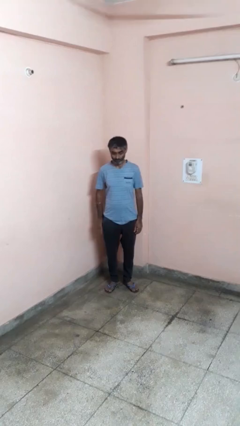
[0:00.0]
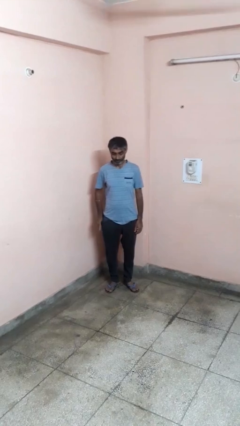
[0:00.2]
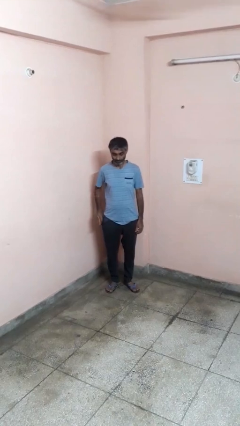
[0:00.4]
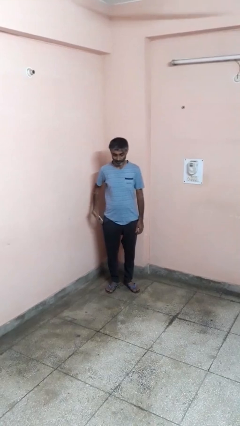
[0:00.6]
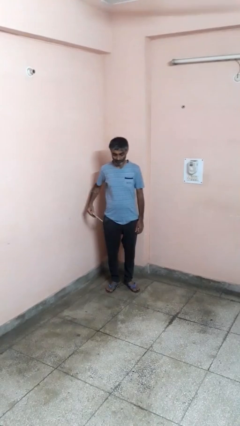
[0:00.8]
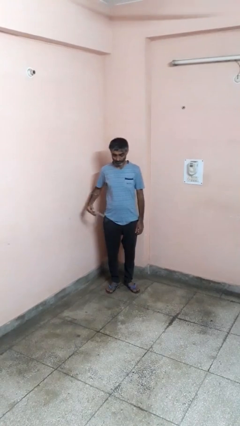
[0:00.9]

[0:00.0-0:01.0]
person takes phone from pocket

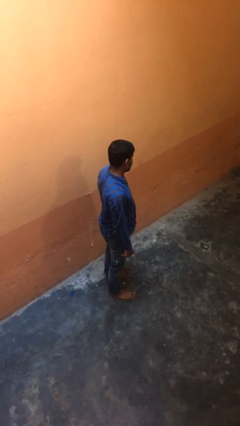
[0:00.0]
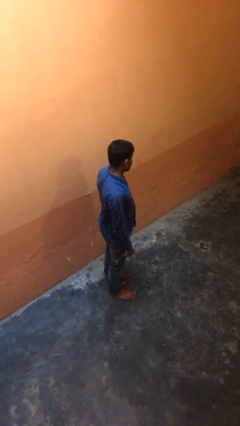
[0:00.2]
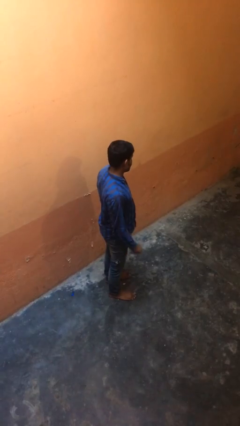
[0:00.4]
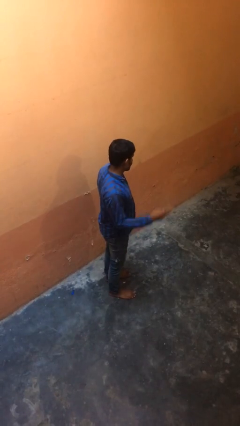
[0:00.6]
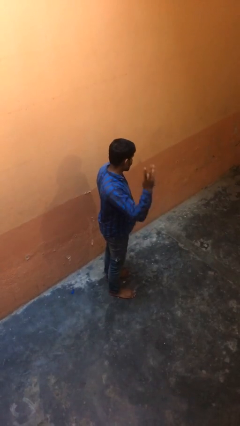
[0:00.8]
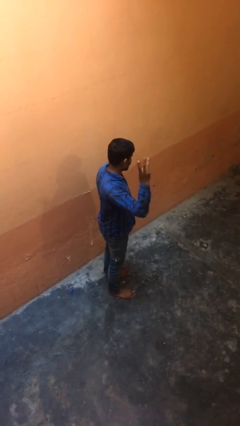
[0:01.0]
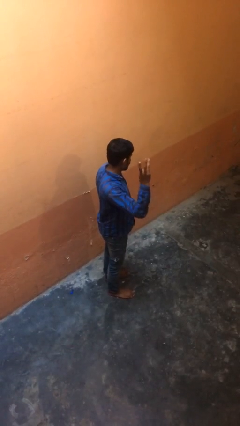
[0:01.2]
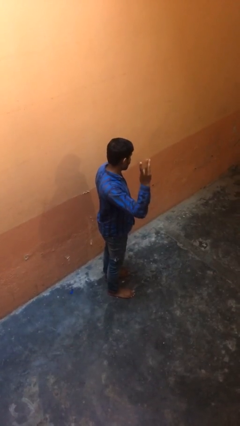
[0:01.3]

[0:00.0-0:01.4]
person gestures number three

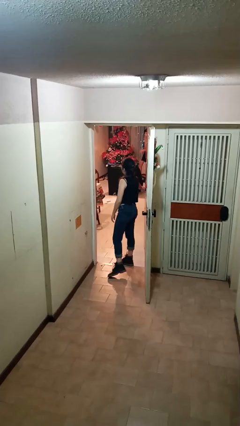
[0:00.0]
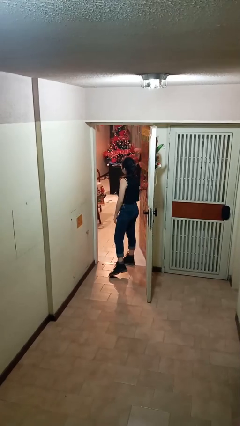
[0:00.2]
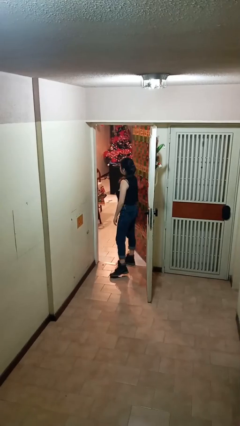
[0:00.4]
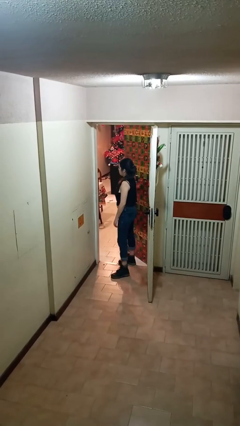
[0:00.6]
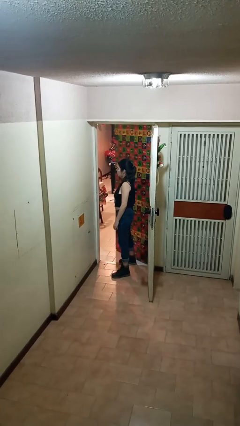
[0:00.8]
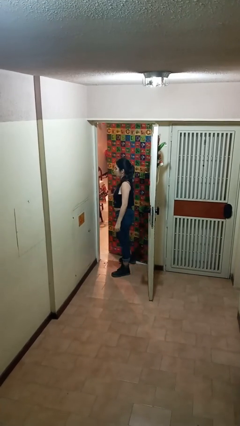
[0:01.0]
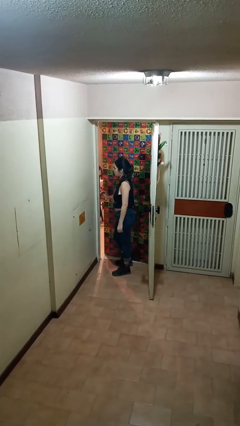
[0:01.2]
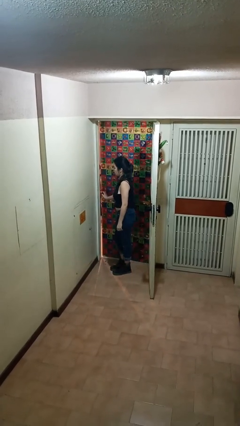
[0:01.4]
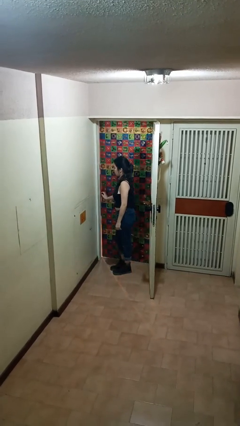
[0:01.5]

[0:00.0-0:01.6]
person closes facility door

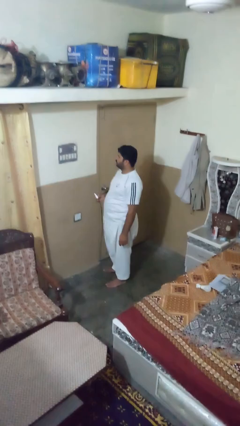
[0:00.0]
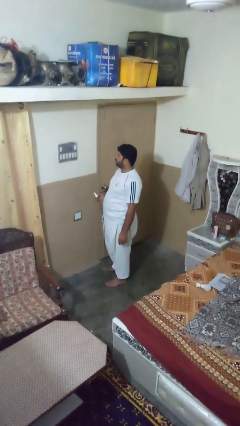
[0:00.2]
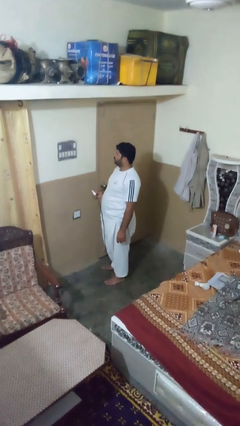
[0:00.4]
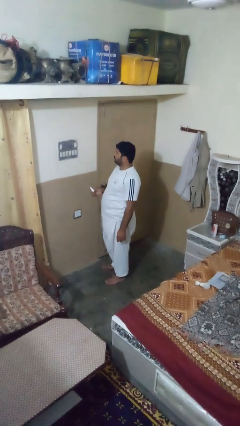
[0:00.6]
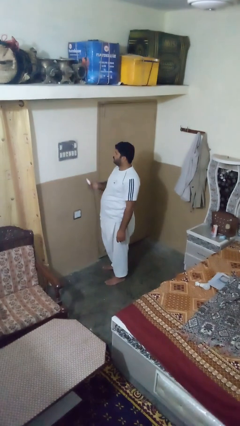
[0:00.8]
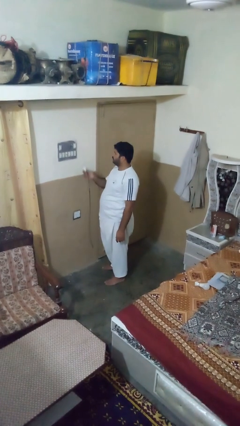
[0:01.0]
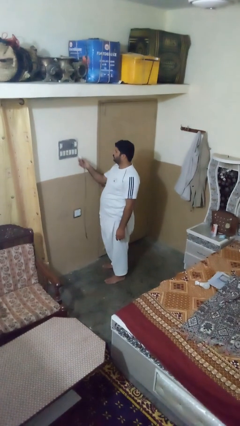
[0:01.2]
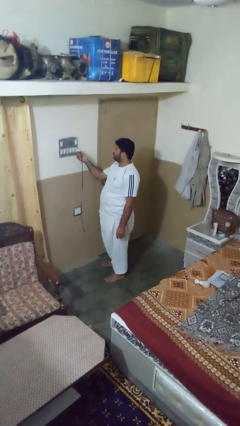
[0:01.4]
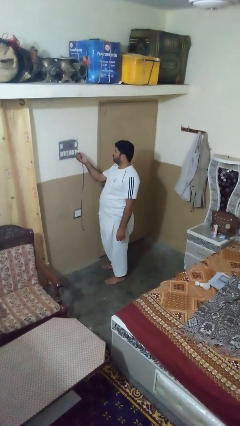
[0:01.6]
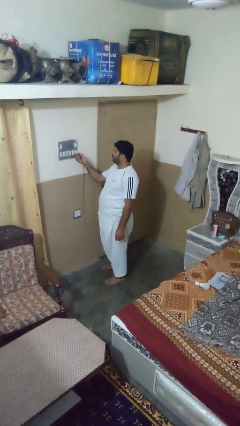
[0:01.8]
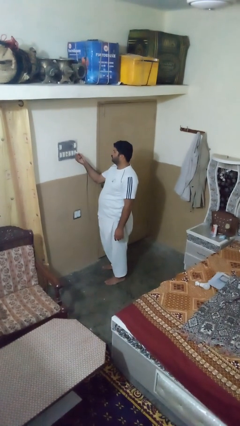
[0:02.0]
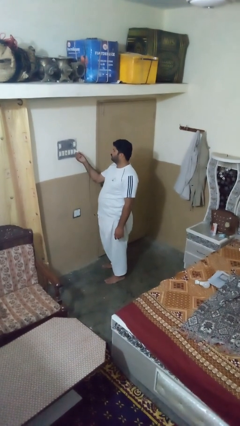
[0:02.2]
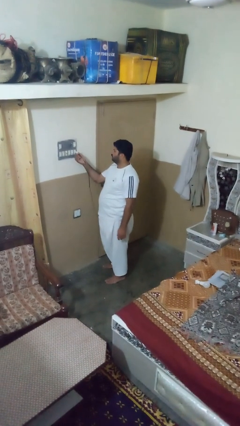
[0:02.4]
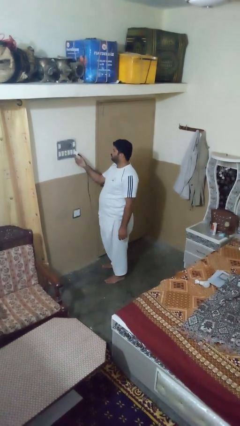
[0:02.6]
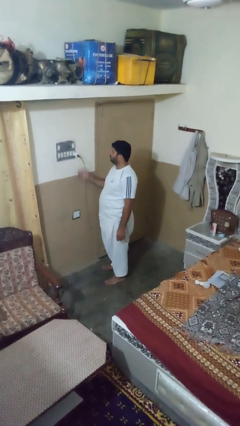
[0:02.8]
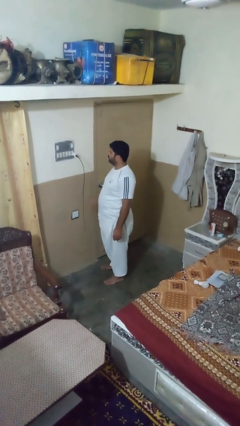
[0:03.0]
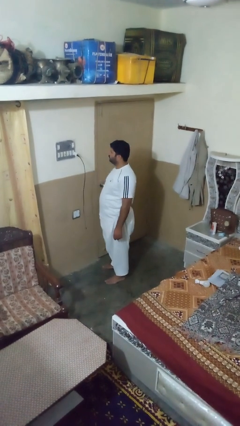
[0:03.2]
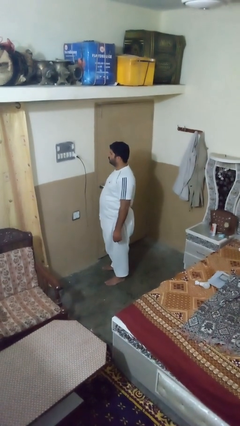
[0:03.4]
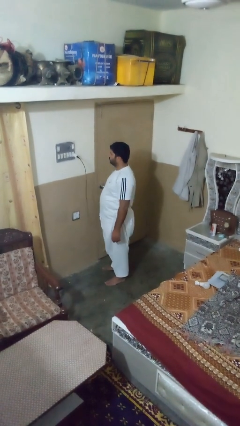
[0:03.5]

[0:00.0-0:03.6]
person plugs into electrical socket

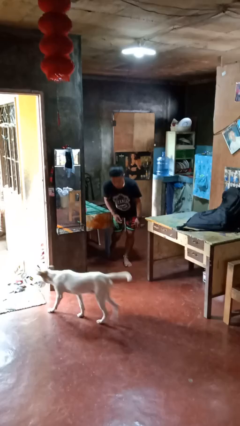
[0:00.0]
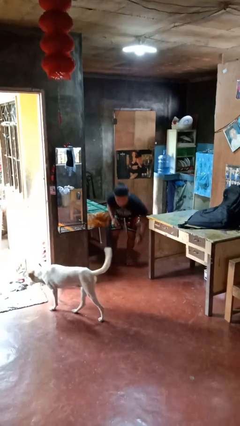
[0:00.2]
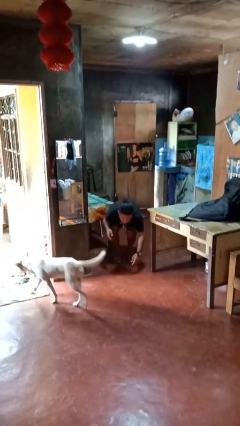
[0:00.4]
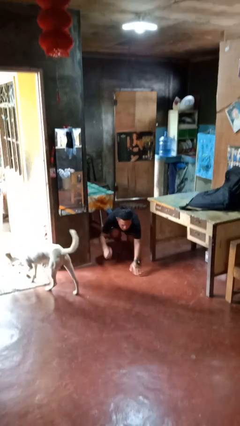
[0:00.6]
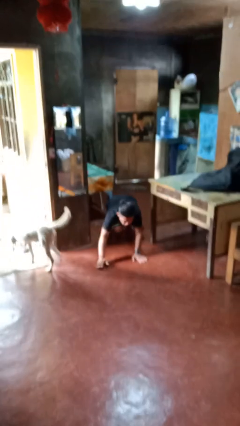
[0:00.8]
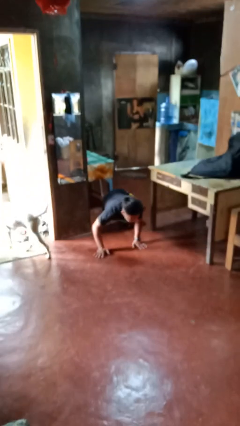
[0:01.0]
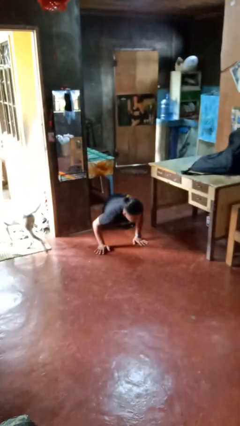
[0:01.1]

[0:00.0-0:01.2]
person trips on object on floor

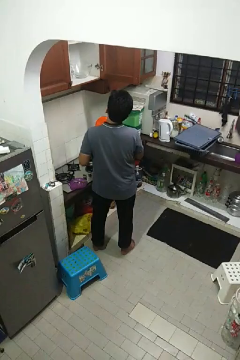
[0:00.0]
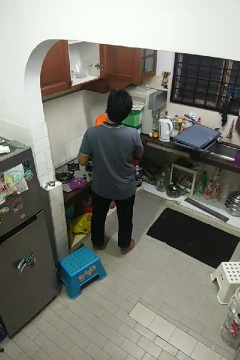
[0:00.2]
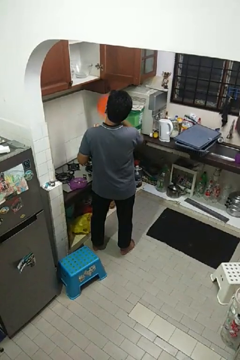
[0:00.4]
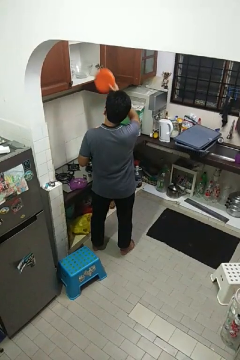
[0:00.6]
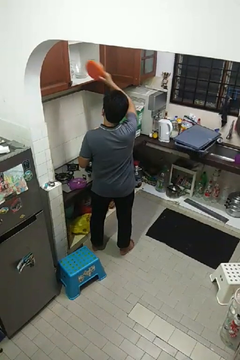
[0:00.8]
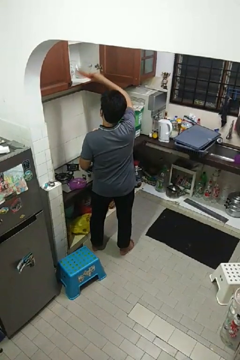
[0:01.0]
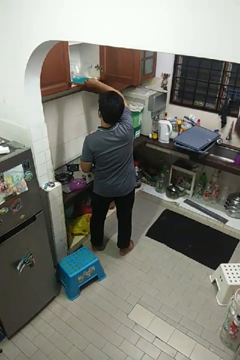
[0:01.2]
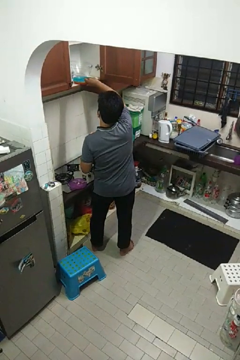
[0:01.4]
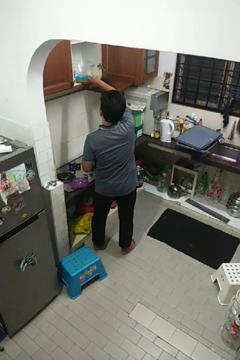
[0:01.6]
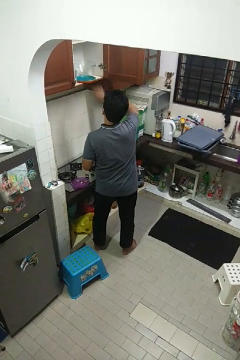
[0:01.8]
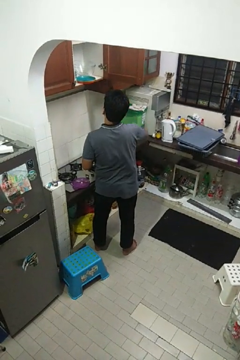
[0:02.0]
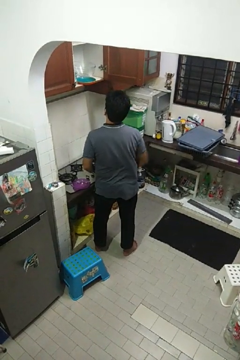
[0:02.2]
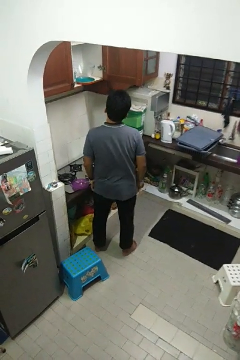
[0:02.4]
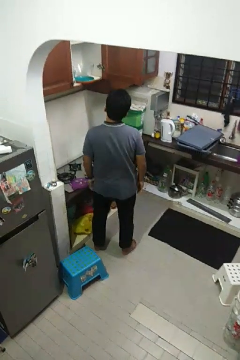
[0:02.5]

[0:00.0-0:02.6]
person puts object in cabinet

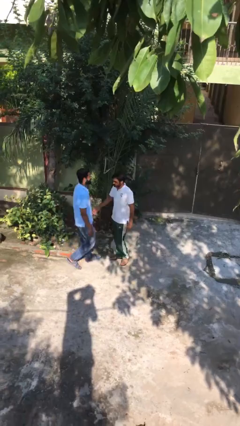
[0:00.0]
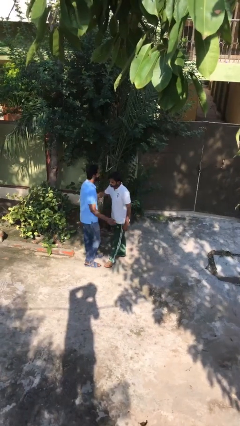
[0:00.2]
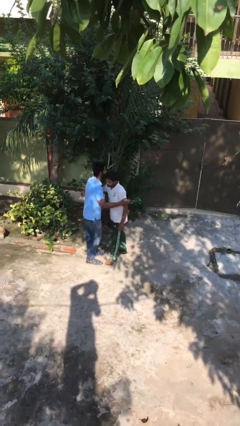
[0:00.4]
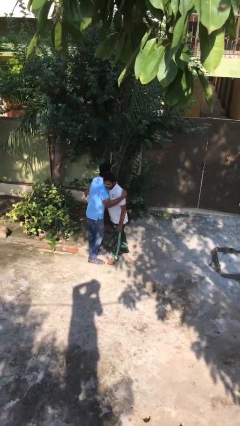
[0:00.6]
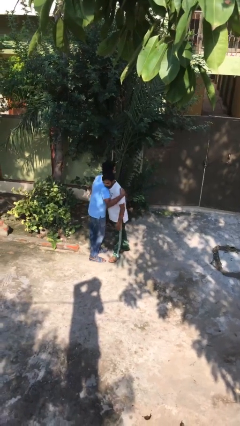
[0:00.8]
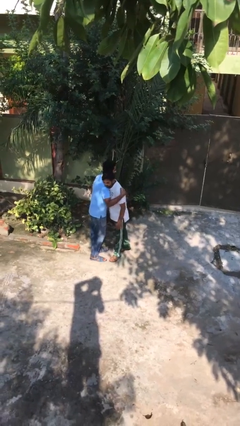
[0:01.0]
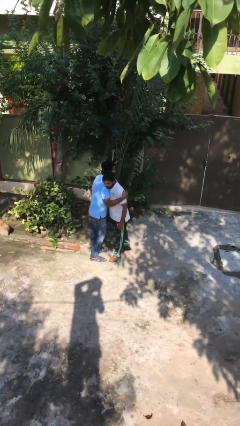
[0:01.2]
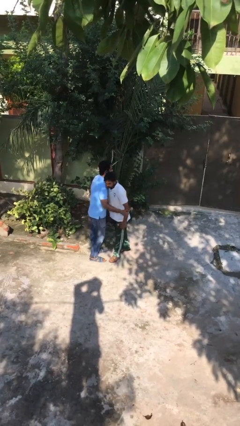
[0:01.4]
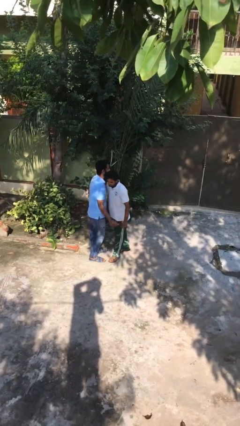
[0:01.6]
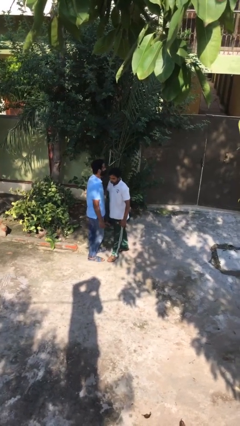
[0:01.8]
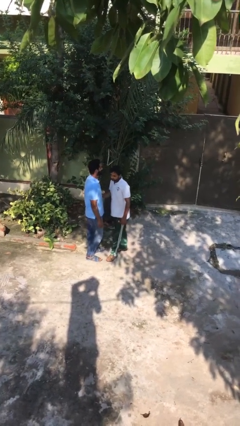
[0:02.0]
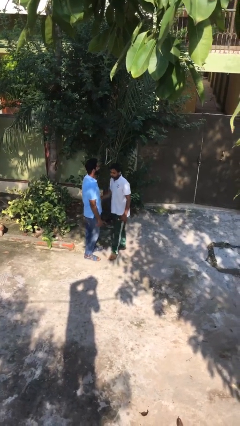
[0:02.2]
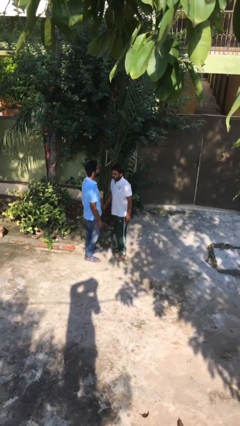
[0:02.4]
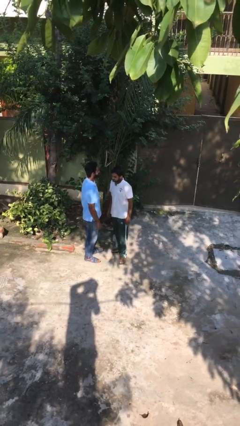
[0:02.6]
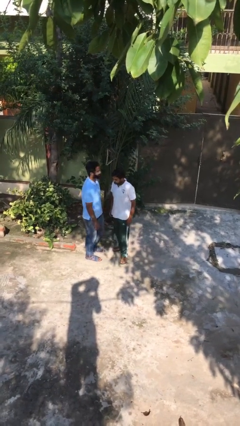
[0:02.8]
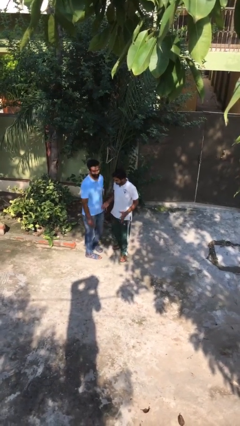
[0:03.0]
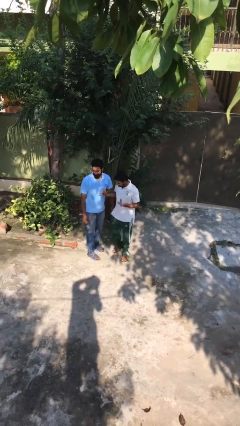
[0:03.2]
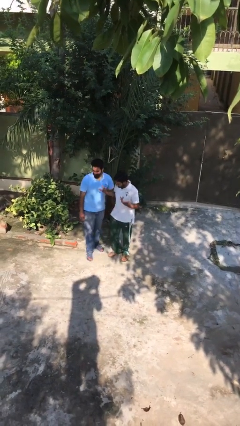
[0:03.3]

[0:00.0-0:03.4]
person embraces person

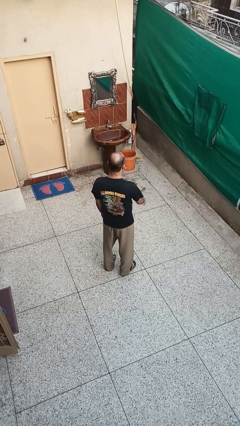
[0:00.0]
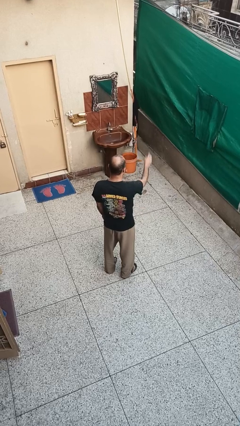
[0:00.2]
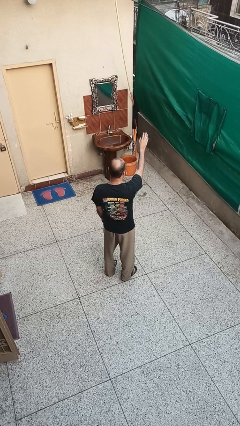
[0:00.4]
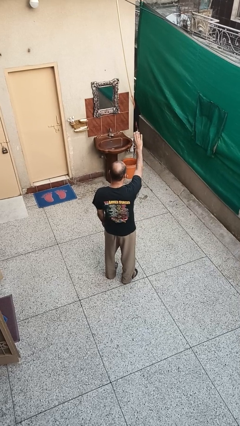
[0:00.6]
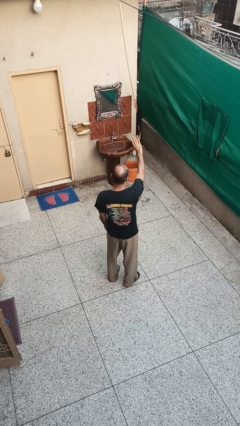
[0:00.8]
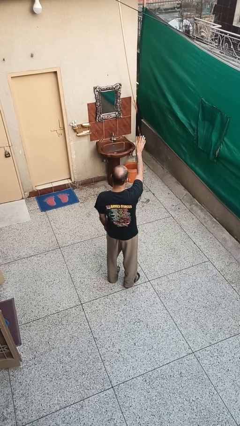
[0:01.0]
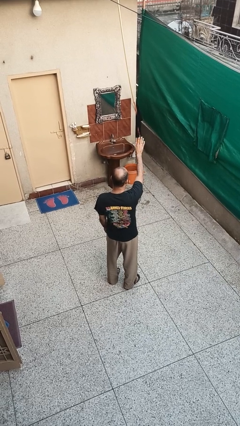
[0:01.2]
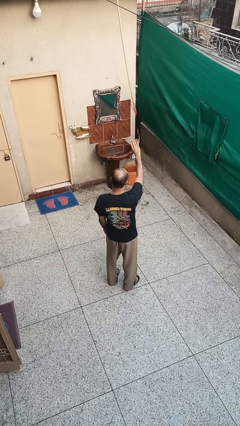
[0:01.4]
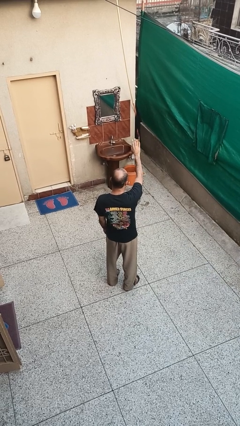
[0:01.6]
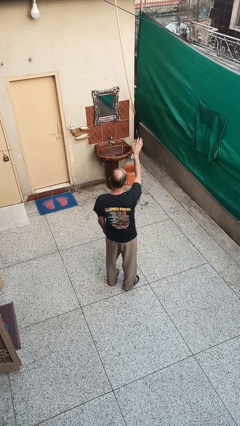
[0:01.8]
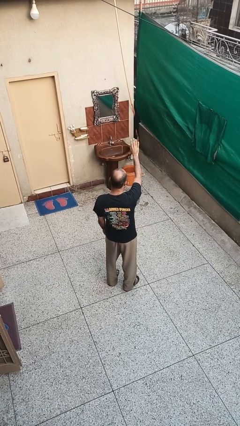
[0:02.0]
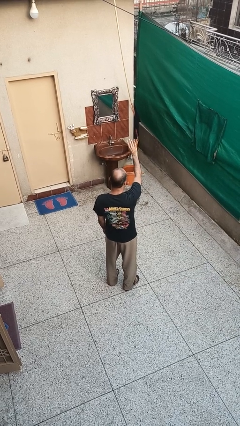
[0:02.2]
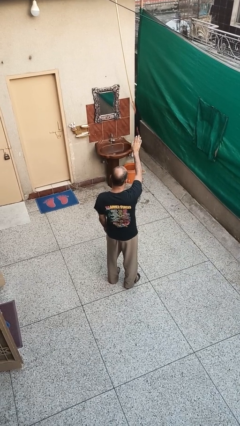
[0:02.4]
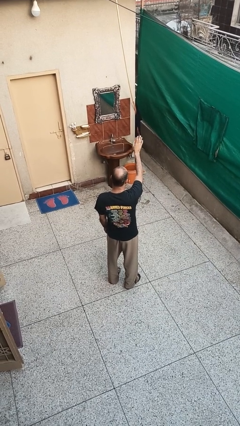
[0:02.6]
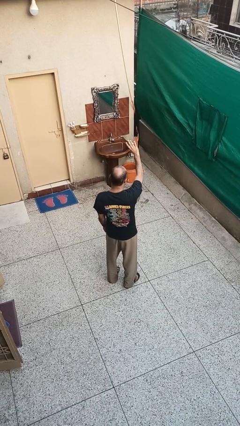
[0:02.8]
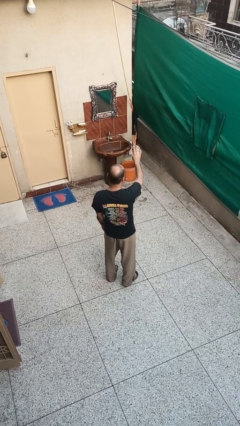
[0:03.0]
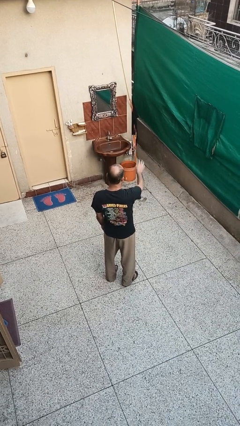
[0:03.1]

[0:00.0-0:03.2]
person waves at person
